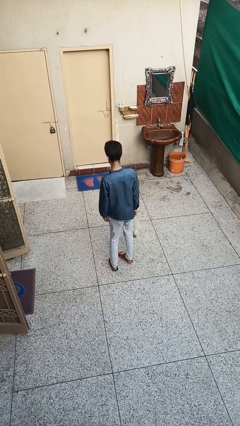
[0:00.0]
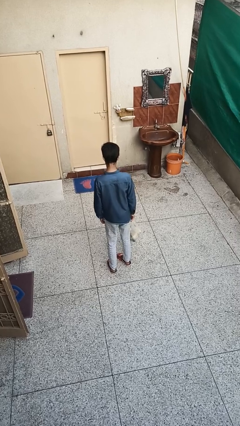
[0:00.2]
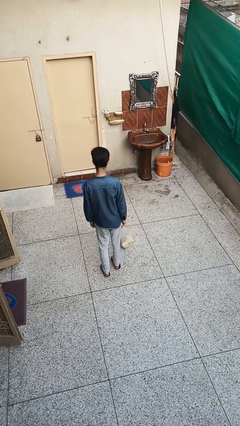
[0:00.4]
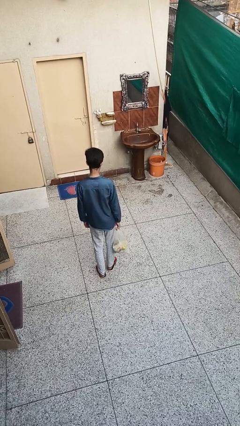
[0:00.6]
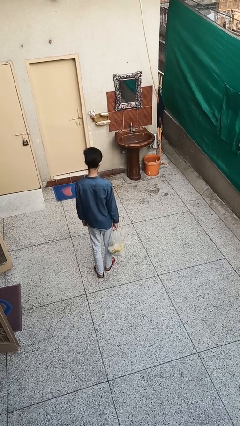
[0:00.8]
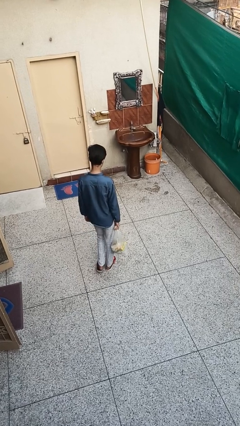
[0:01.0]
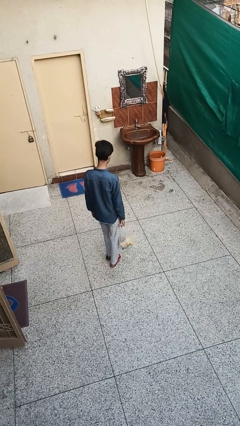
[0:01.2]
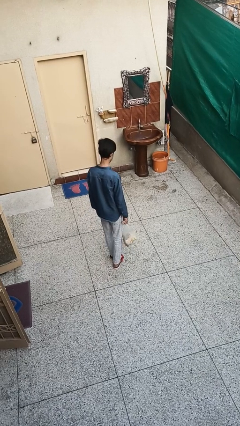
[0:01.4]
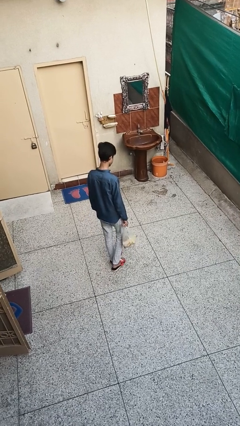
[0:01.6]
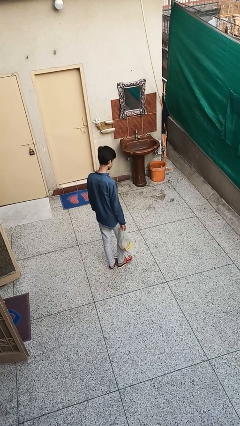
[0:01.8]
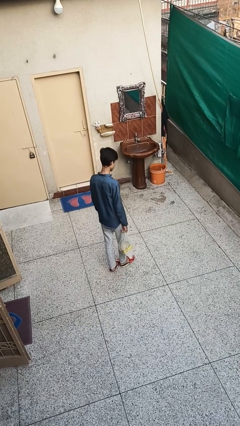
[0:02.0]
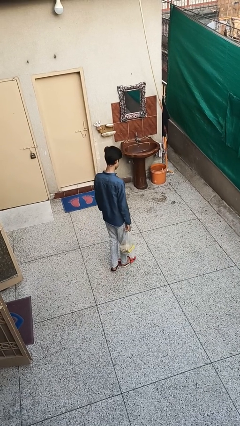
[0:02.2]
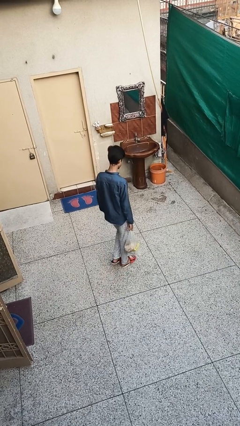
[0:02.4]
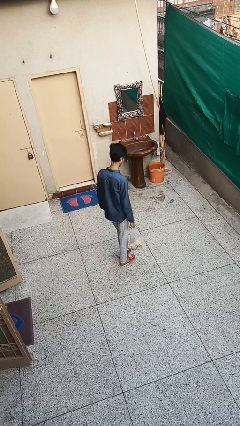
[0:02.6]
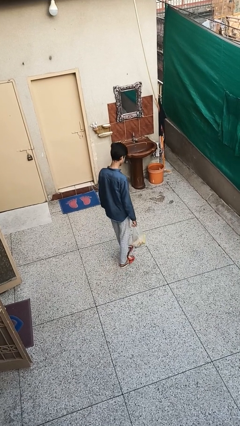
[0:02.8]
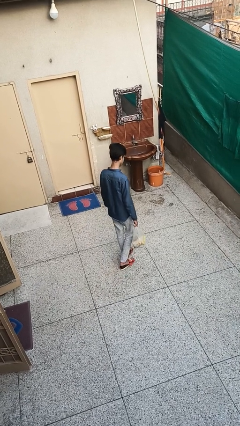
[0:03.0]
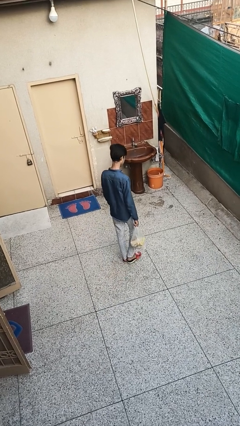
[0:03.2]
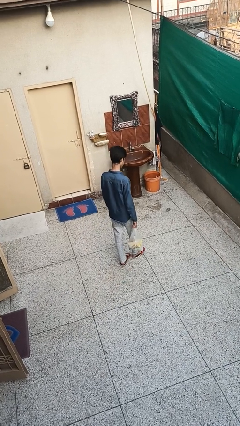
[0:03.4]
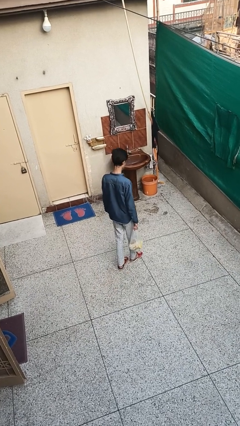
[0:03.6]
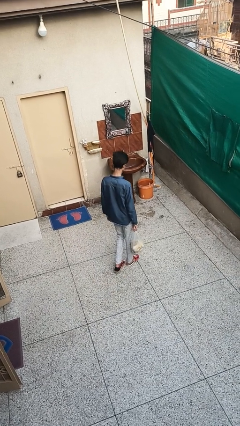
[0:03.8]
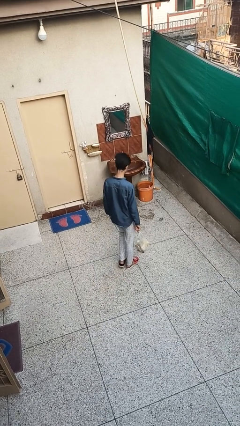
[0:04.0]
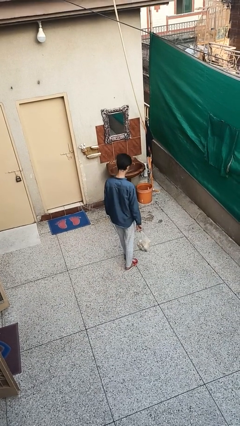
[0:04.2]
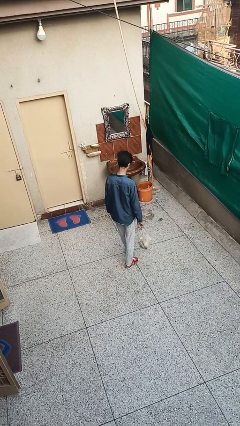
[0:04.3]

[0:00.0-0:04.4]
person carries groceries

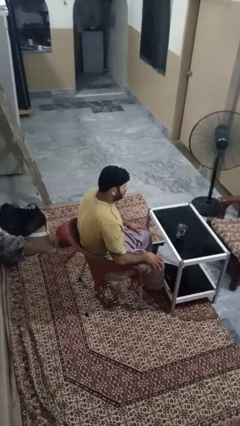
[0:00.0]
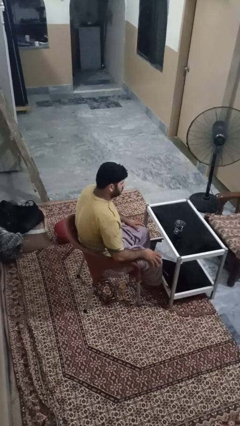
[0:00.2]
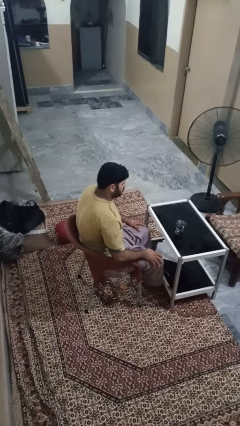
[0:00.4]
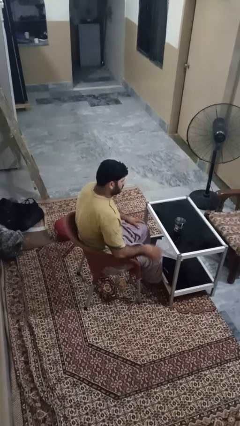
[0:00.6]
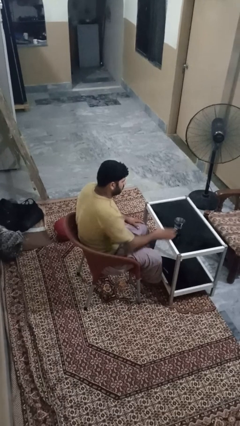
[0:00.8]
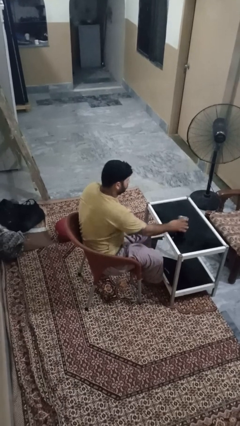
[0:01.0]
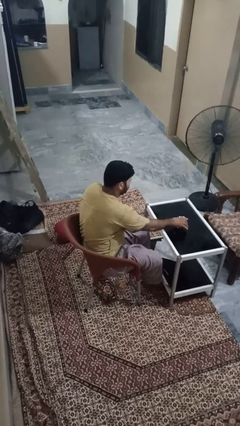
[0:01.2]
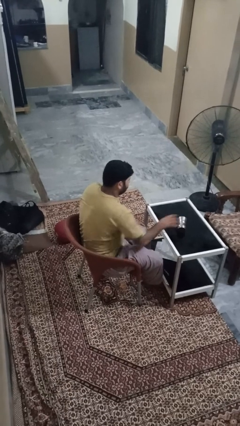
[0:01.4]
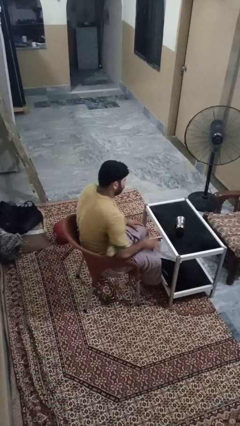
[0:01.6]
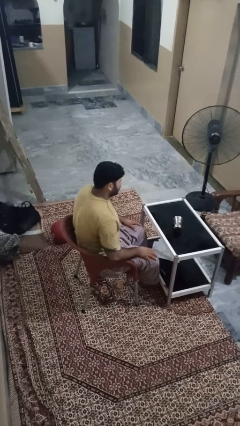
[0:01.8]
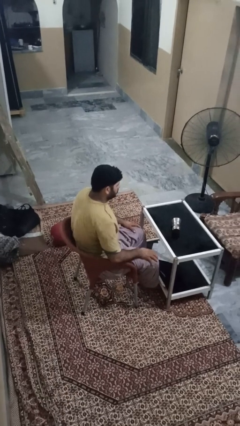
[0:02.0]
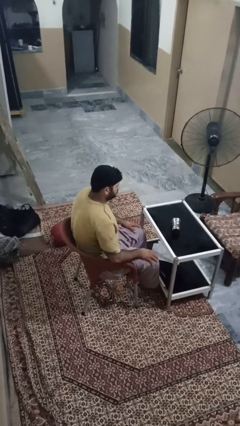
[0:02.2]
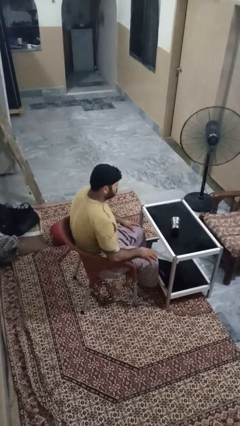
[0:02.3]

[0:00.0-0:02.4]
person knocks over glass

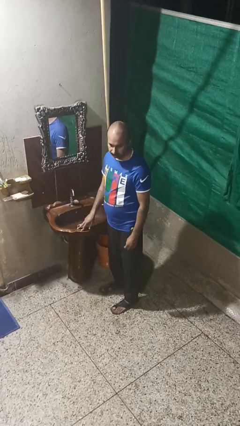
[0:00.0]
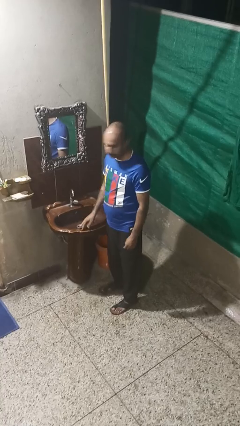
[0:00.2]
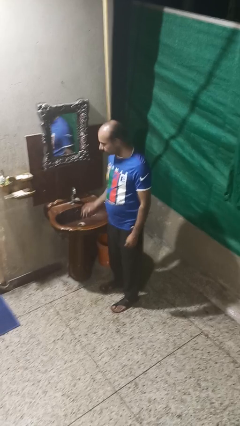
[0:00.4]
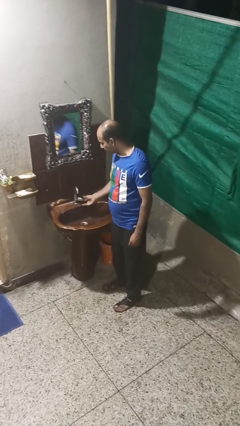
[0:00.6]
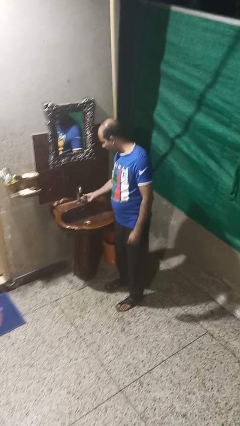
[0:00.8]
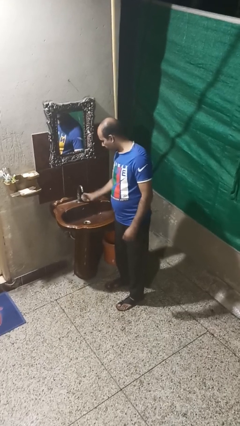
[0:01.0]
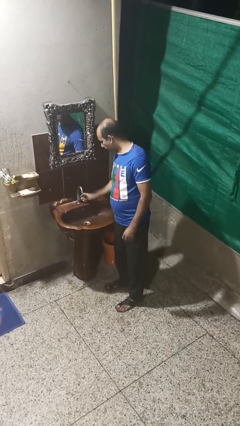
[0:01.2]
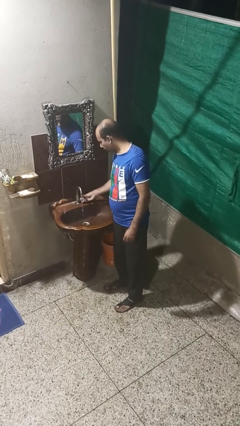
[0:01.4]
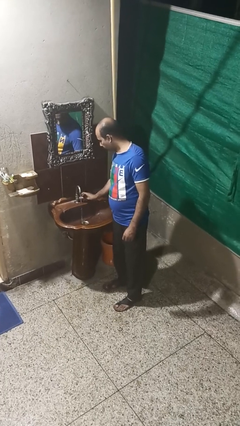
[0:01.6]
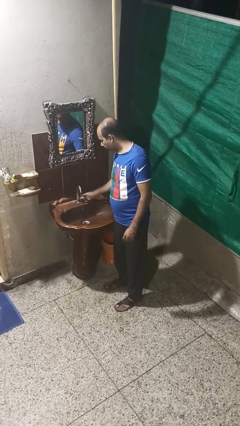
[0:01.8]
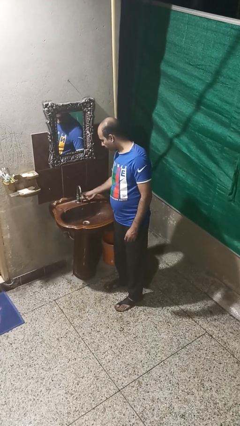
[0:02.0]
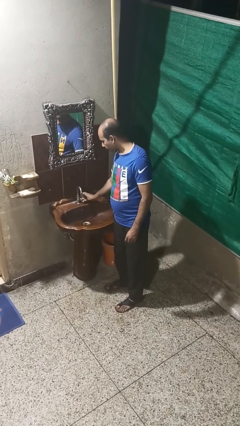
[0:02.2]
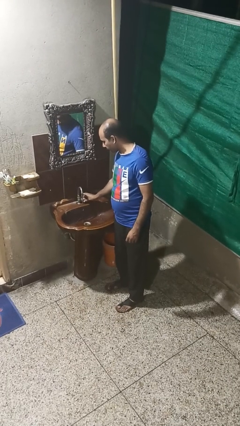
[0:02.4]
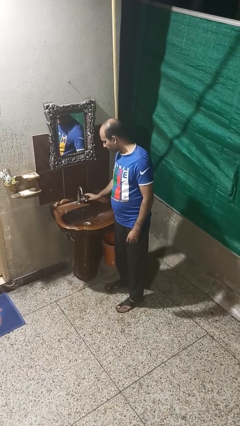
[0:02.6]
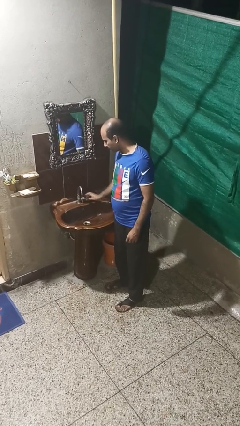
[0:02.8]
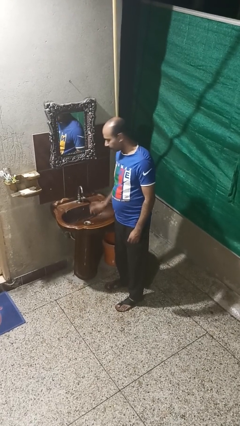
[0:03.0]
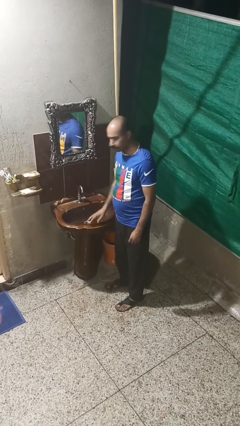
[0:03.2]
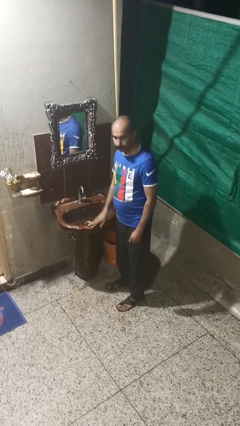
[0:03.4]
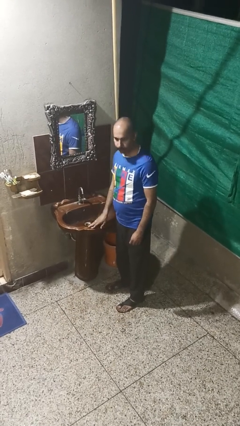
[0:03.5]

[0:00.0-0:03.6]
person turns on faucet

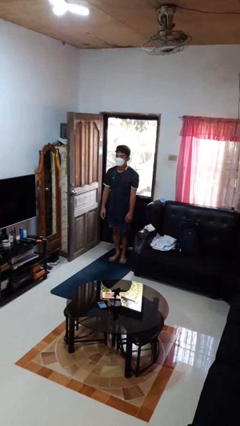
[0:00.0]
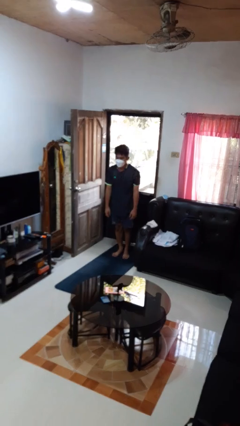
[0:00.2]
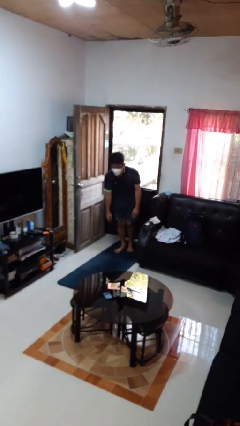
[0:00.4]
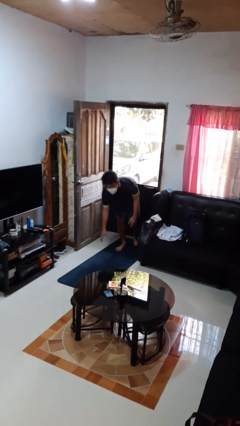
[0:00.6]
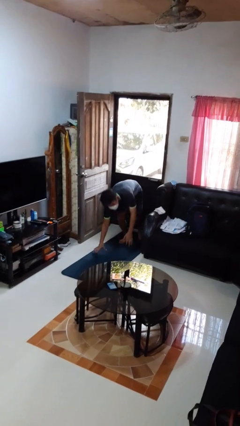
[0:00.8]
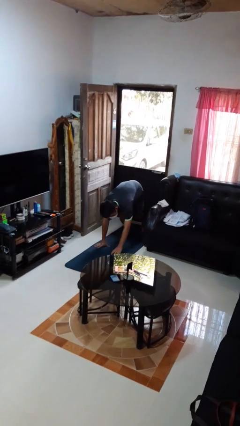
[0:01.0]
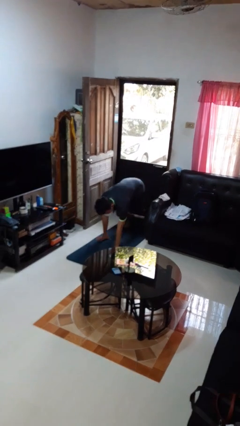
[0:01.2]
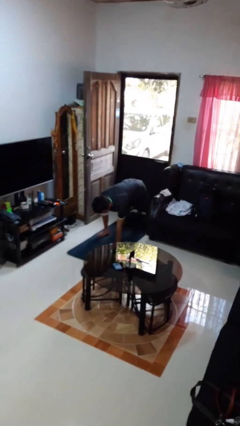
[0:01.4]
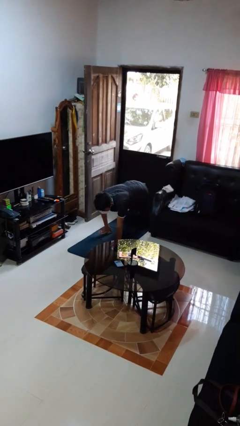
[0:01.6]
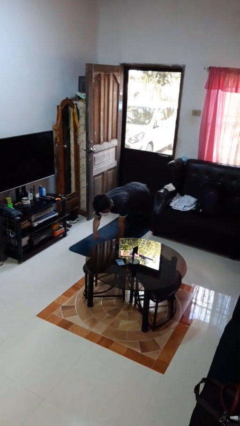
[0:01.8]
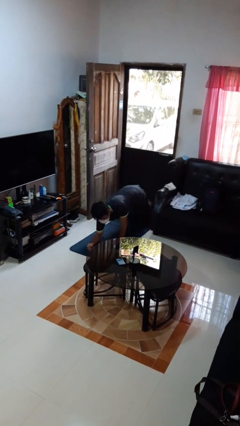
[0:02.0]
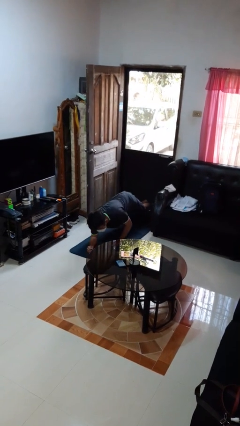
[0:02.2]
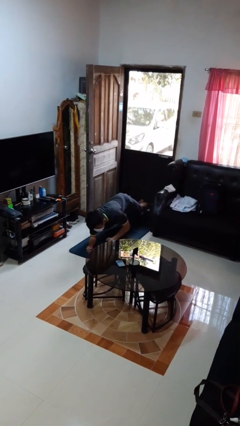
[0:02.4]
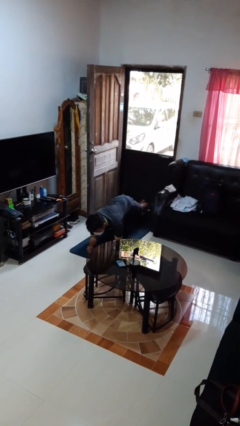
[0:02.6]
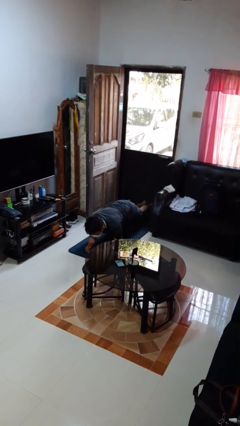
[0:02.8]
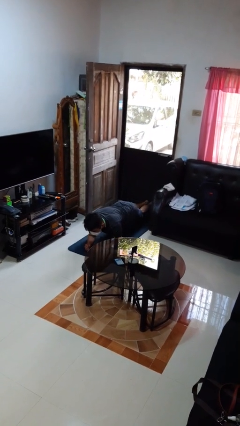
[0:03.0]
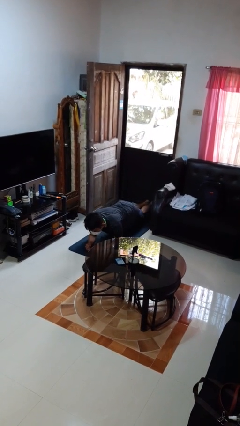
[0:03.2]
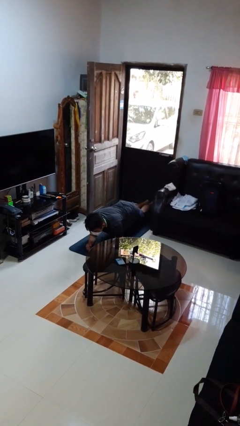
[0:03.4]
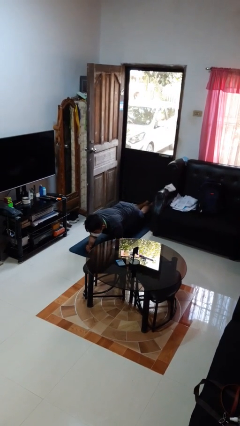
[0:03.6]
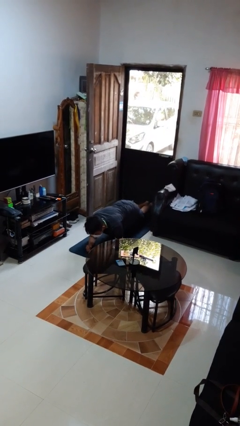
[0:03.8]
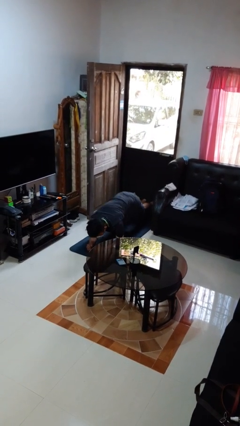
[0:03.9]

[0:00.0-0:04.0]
person exercises with plank

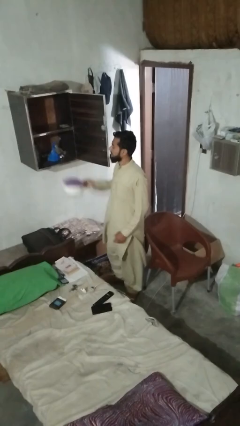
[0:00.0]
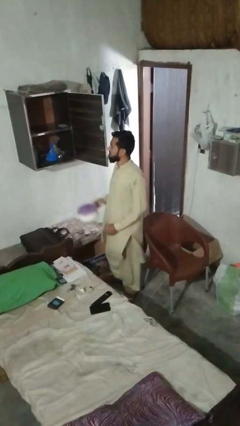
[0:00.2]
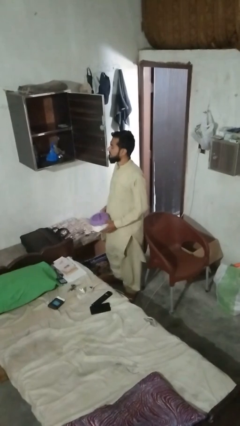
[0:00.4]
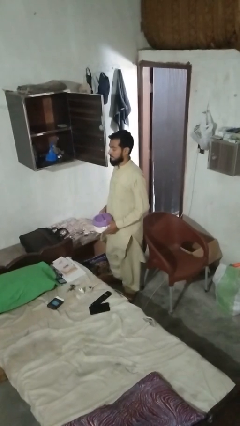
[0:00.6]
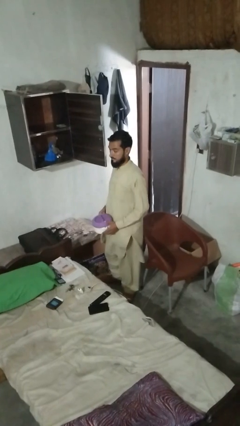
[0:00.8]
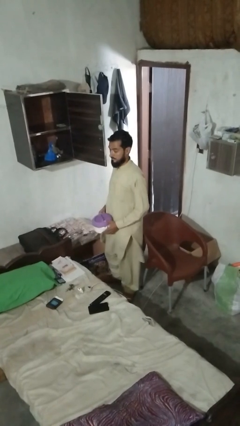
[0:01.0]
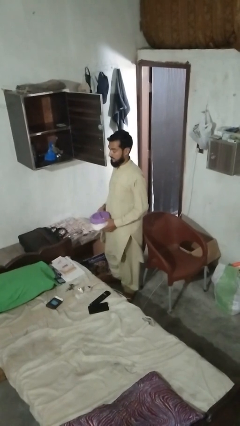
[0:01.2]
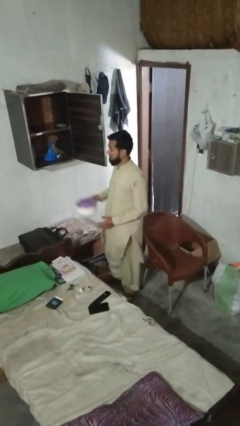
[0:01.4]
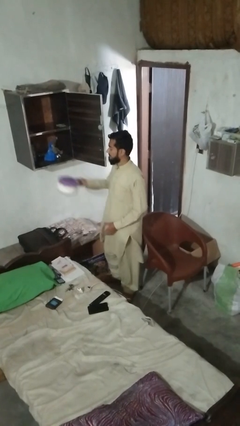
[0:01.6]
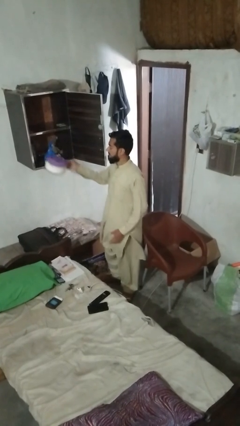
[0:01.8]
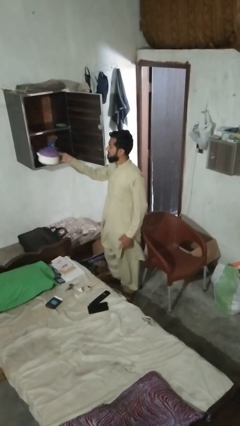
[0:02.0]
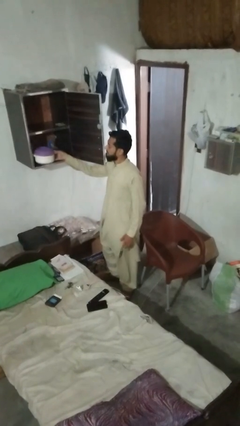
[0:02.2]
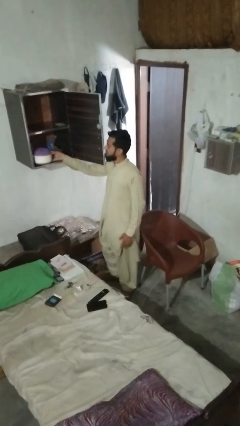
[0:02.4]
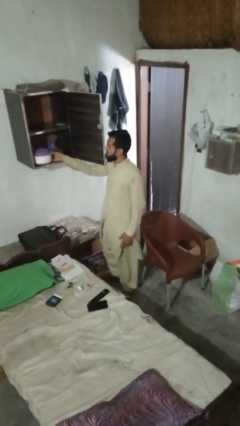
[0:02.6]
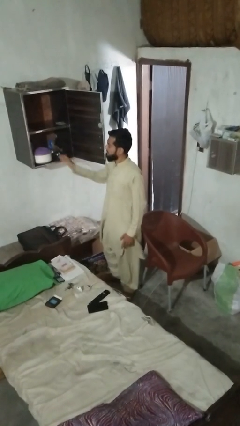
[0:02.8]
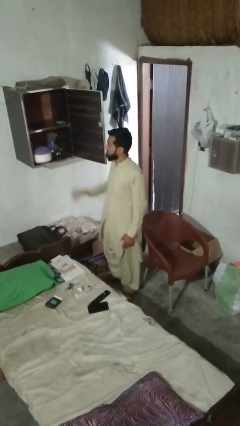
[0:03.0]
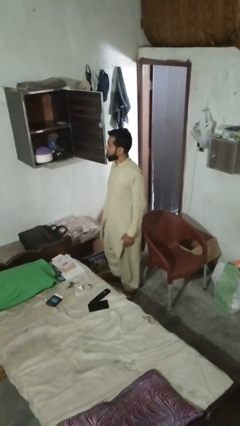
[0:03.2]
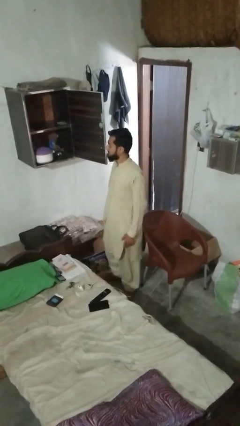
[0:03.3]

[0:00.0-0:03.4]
person loads groceries into cabinet
